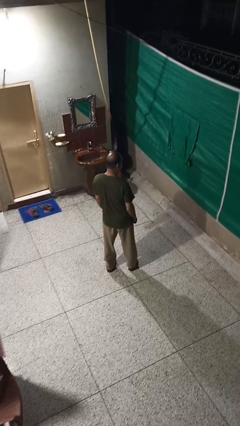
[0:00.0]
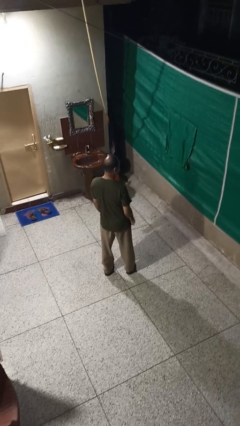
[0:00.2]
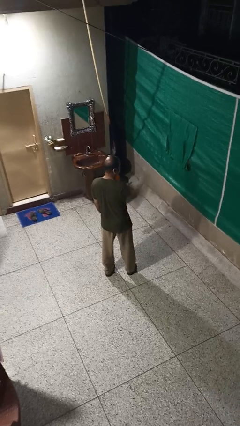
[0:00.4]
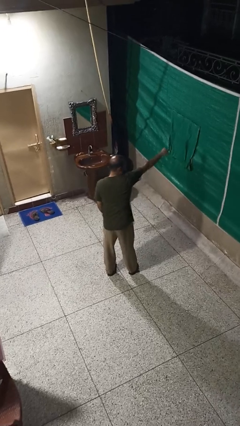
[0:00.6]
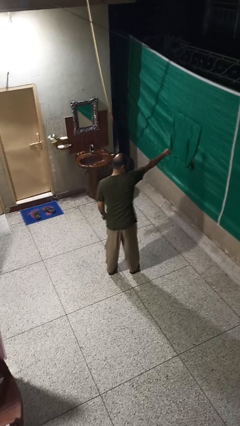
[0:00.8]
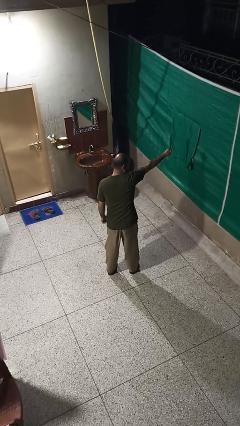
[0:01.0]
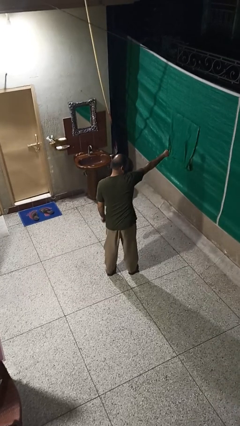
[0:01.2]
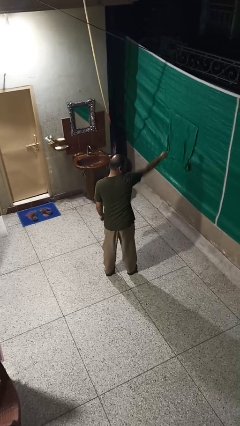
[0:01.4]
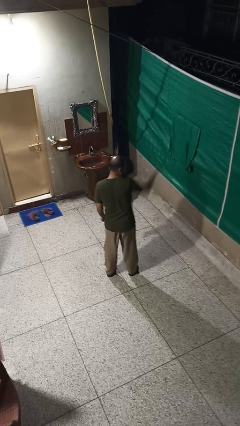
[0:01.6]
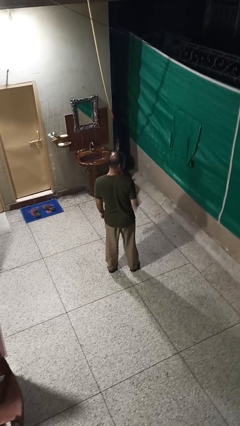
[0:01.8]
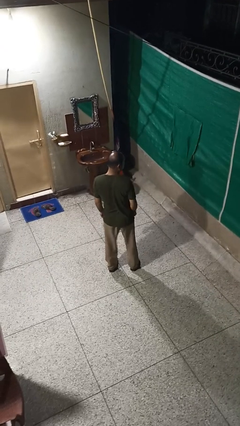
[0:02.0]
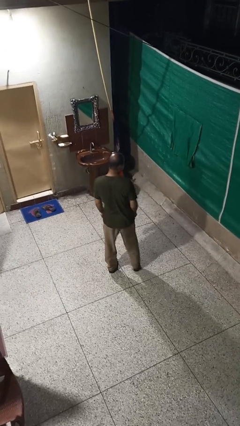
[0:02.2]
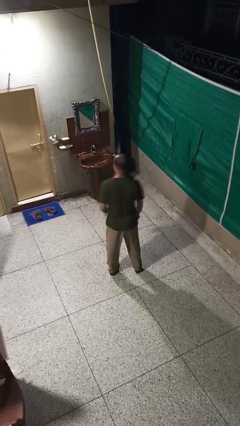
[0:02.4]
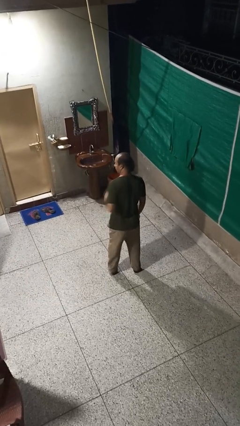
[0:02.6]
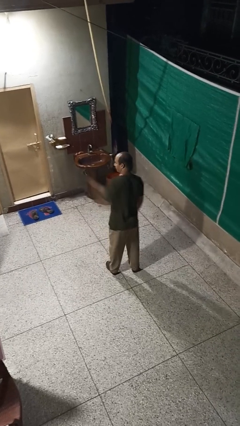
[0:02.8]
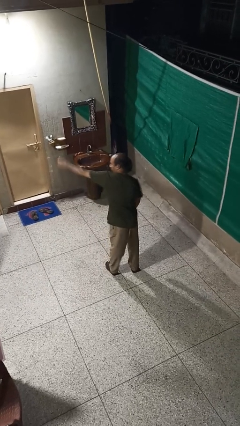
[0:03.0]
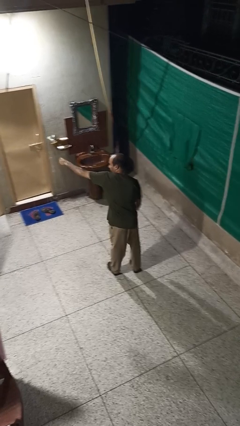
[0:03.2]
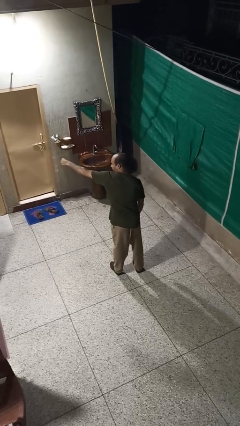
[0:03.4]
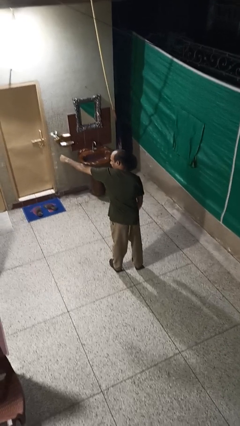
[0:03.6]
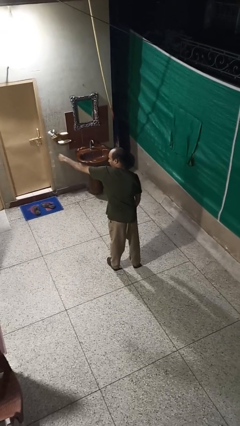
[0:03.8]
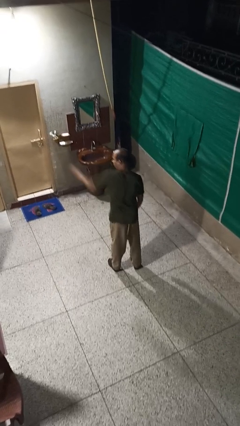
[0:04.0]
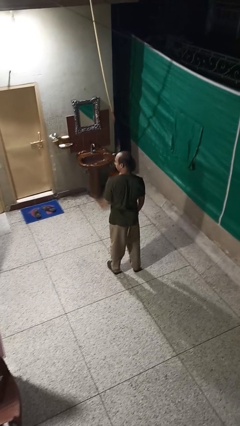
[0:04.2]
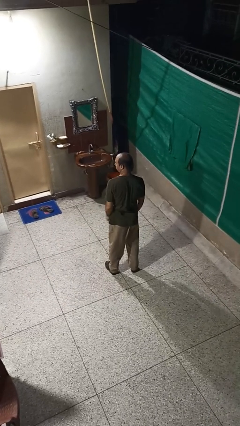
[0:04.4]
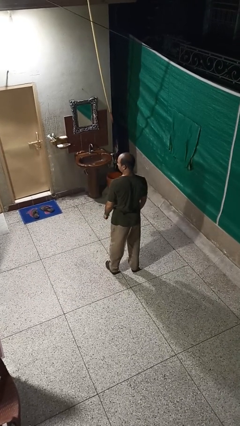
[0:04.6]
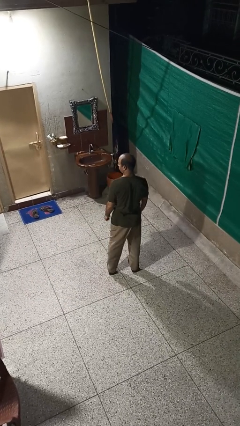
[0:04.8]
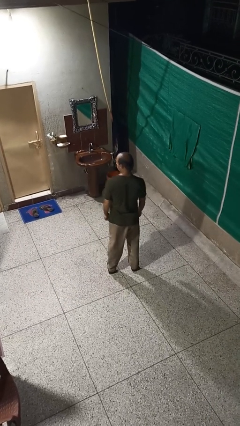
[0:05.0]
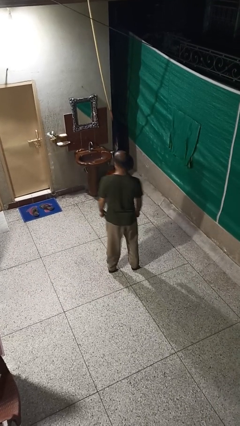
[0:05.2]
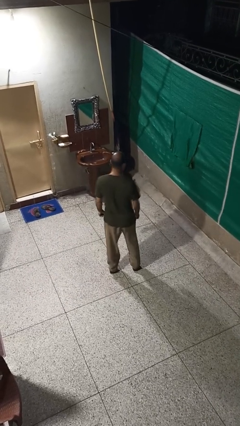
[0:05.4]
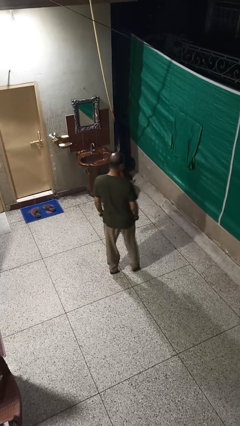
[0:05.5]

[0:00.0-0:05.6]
person punches

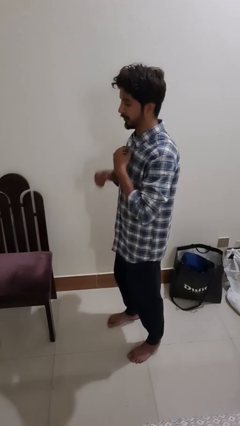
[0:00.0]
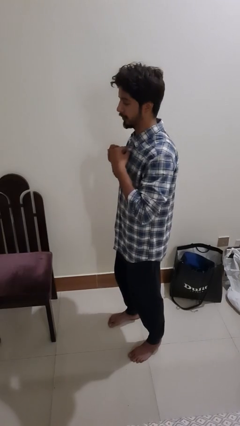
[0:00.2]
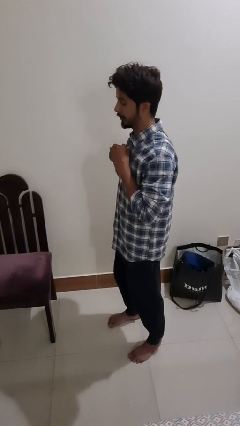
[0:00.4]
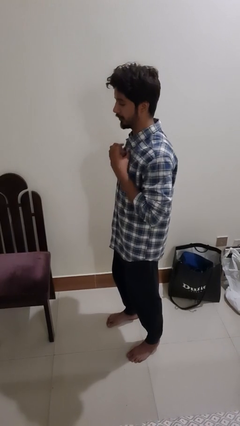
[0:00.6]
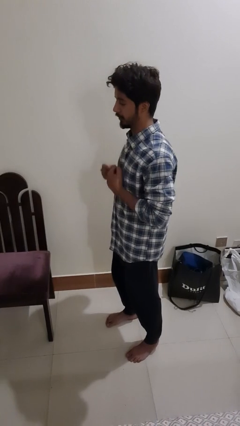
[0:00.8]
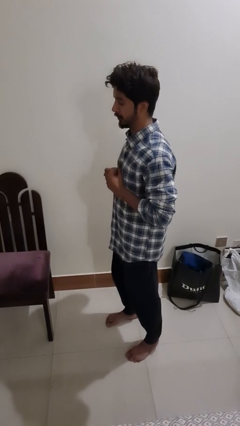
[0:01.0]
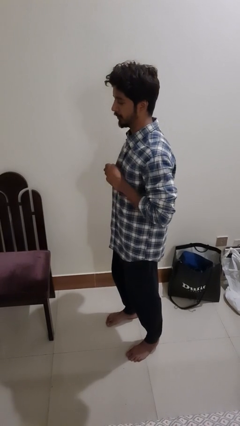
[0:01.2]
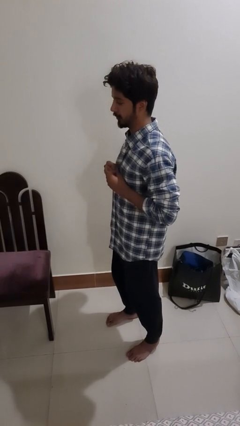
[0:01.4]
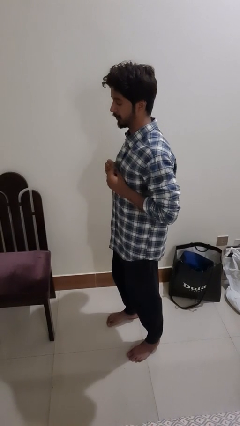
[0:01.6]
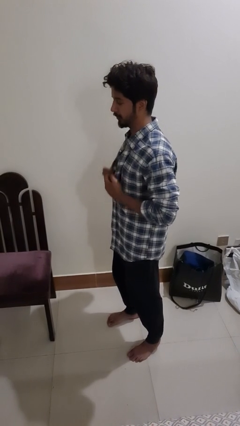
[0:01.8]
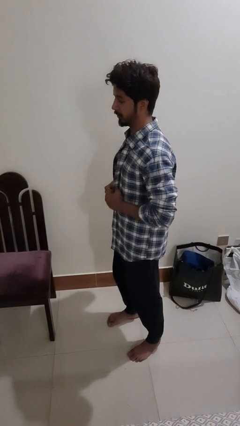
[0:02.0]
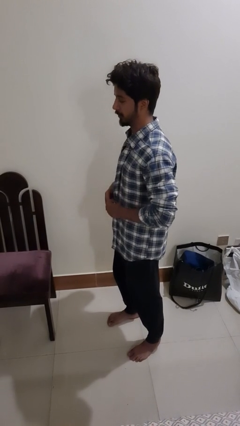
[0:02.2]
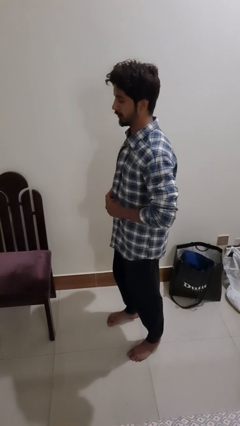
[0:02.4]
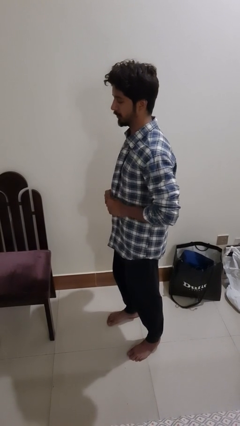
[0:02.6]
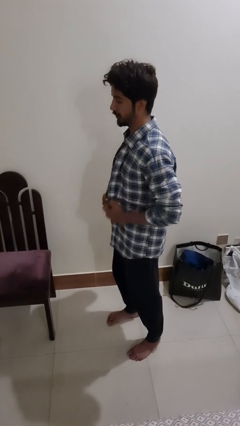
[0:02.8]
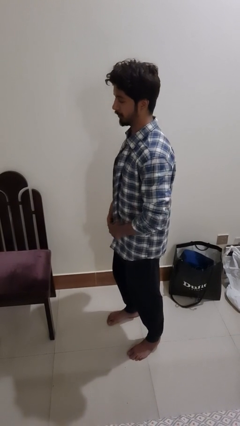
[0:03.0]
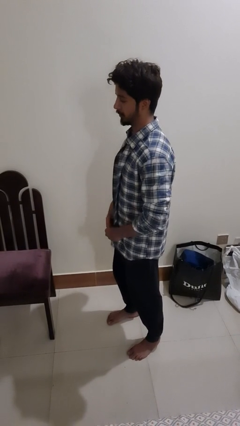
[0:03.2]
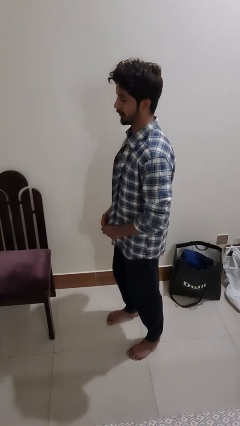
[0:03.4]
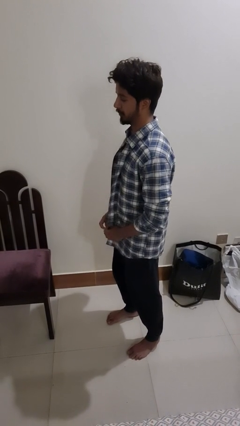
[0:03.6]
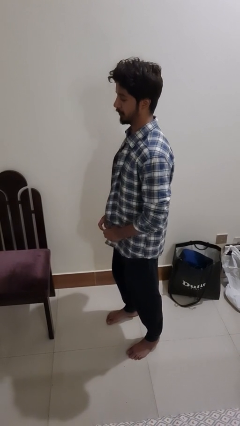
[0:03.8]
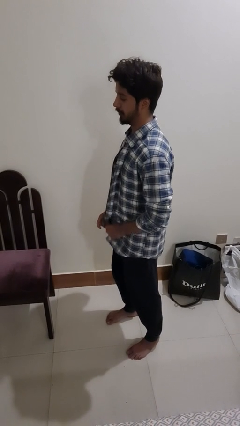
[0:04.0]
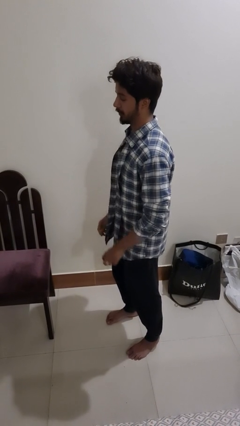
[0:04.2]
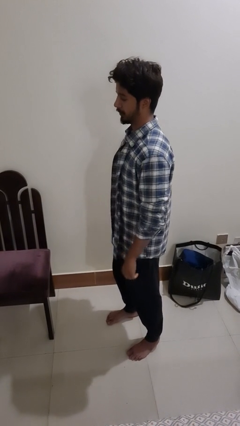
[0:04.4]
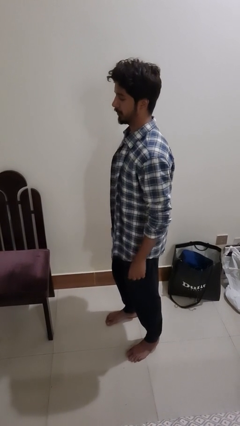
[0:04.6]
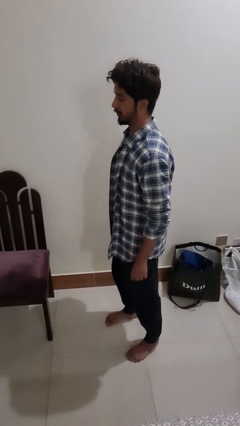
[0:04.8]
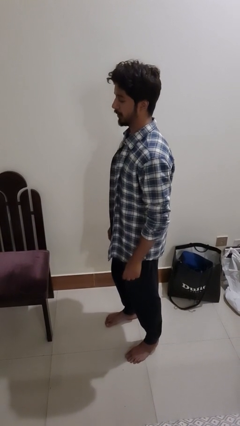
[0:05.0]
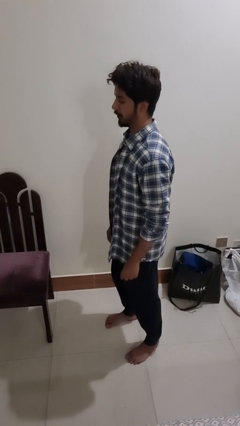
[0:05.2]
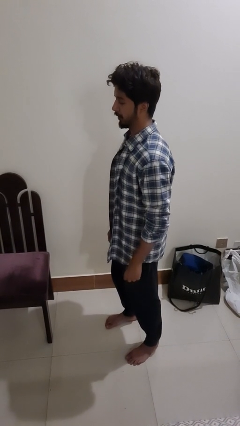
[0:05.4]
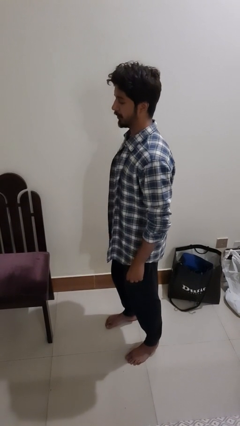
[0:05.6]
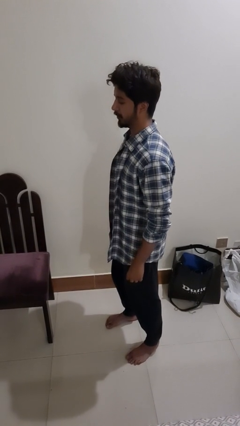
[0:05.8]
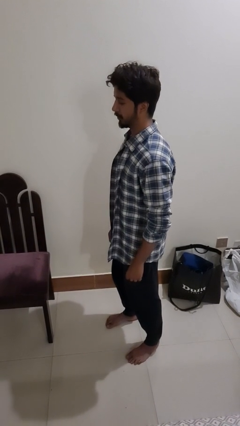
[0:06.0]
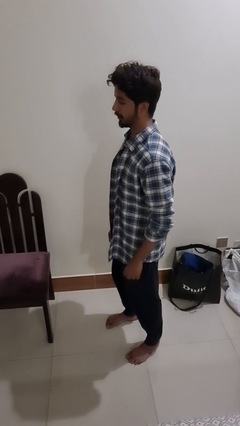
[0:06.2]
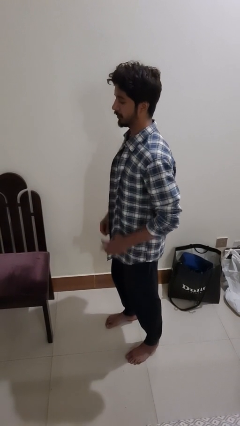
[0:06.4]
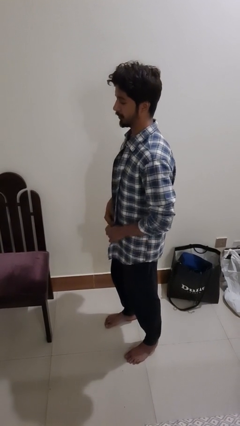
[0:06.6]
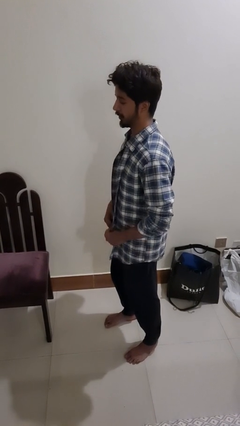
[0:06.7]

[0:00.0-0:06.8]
person unbuttons shirt

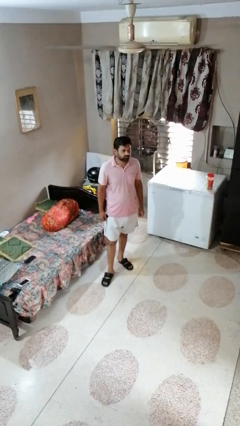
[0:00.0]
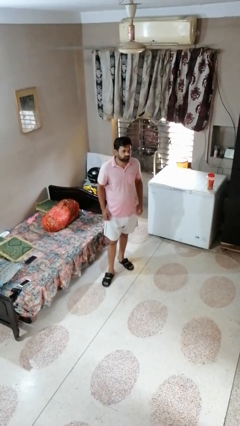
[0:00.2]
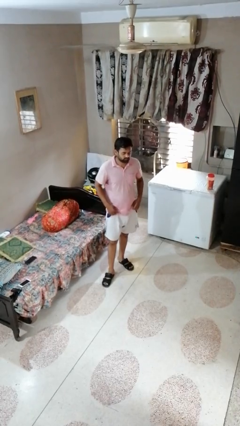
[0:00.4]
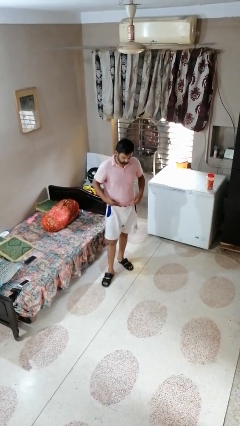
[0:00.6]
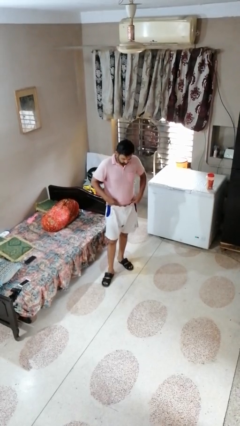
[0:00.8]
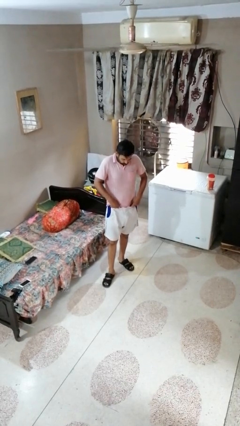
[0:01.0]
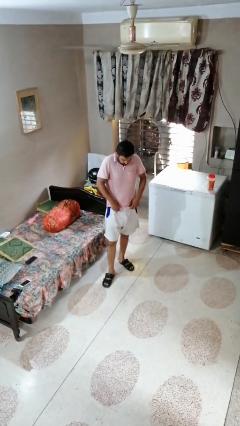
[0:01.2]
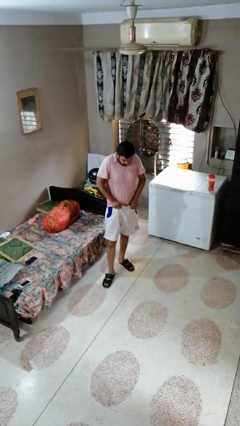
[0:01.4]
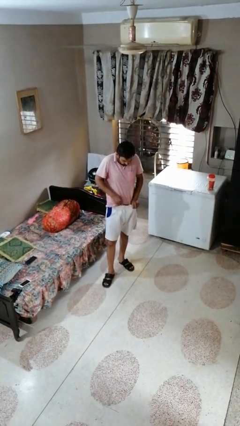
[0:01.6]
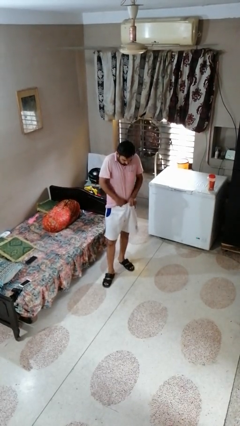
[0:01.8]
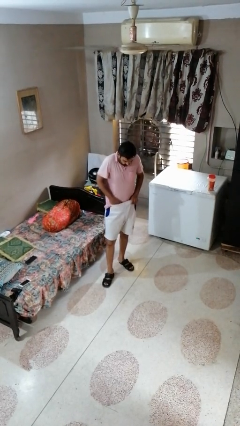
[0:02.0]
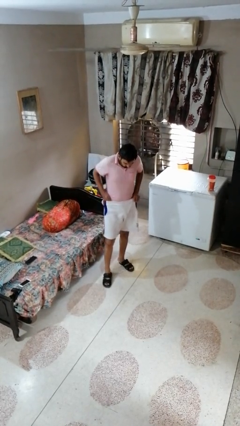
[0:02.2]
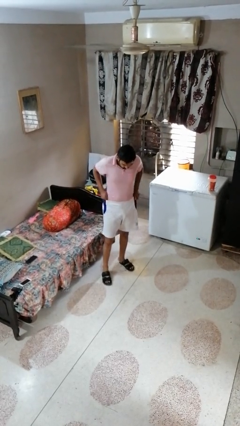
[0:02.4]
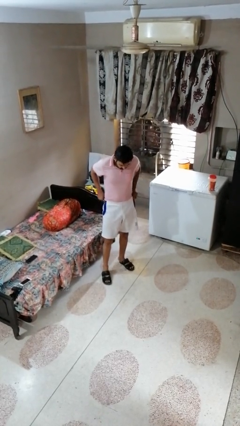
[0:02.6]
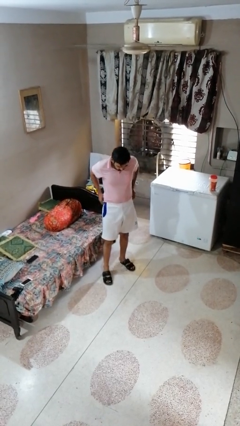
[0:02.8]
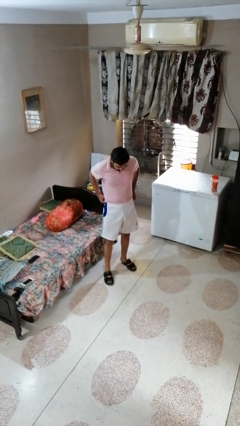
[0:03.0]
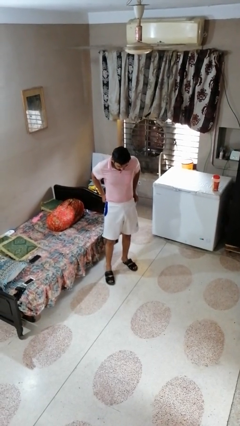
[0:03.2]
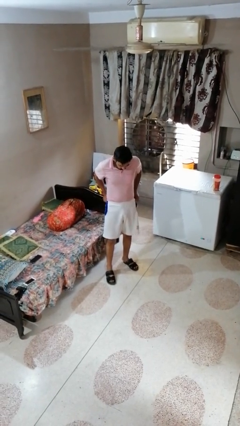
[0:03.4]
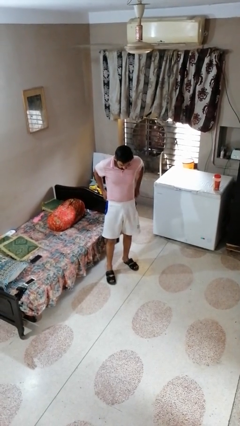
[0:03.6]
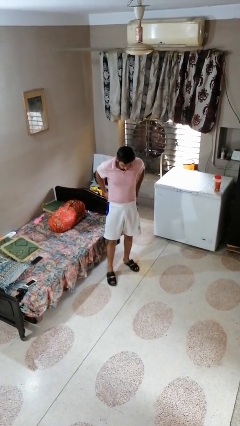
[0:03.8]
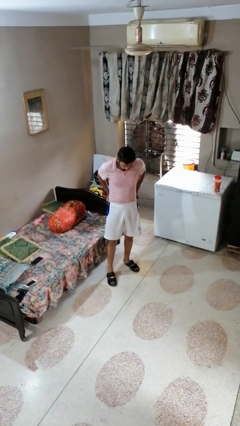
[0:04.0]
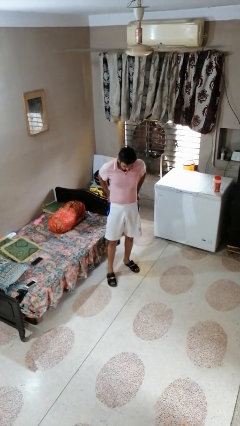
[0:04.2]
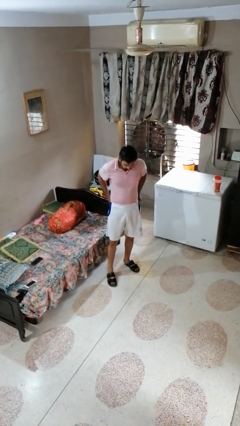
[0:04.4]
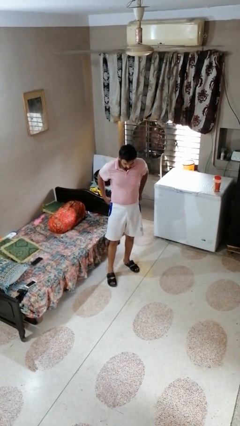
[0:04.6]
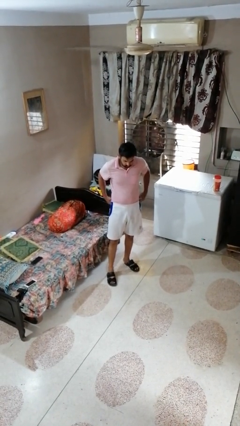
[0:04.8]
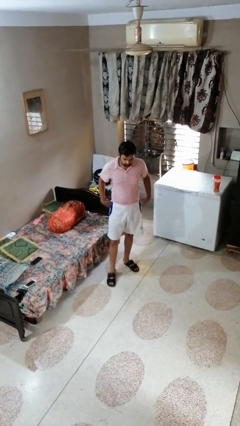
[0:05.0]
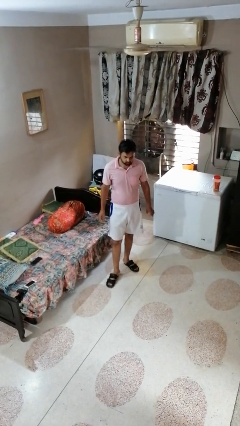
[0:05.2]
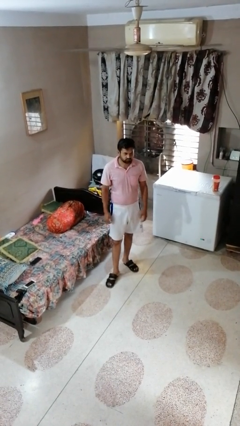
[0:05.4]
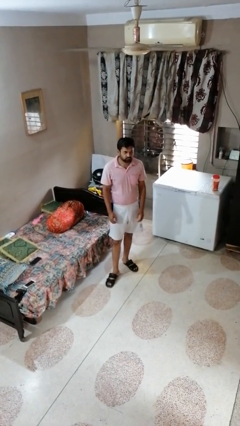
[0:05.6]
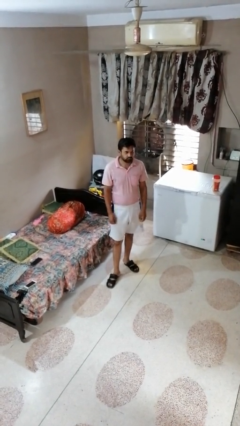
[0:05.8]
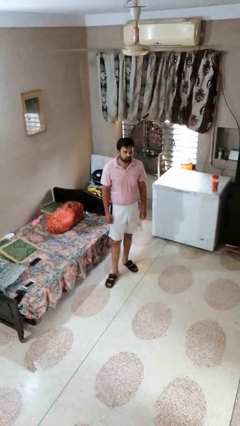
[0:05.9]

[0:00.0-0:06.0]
person tucks in shirt
